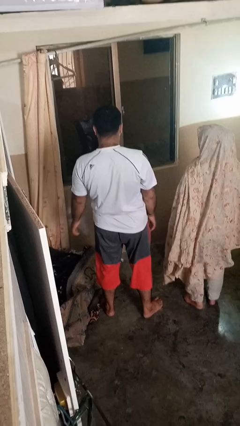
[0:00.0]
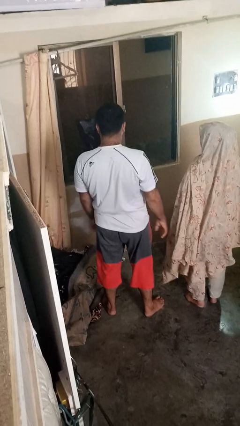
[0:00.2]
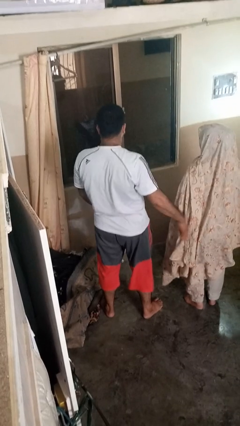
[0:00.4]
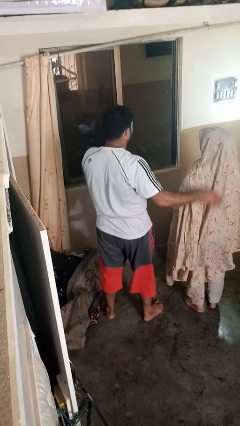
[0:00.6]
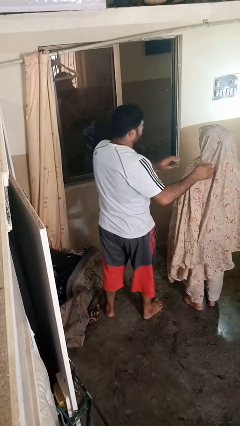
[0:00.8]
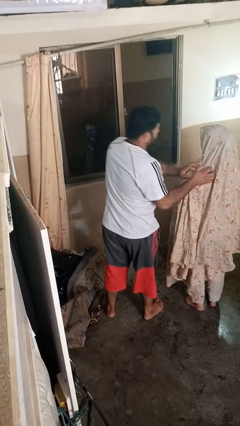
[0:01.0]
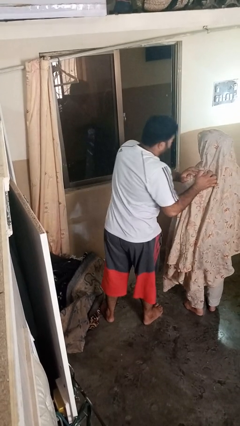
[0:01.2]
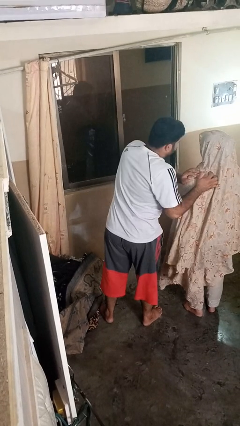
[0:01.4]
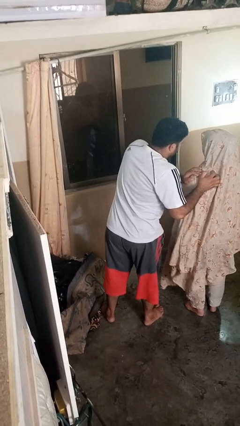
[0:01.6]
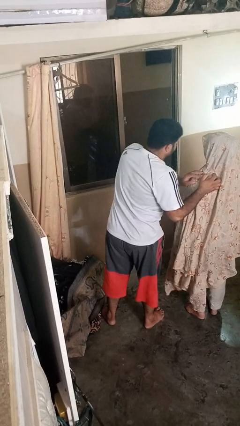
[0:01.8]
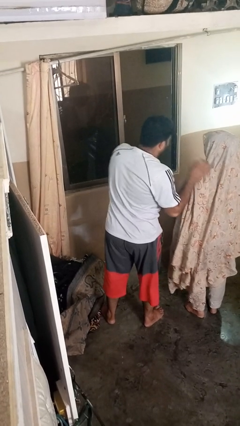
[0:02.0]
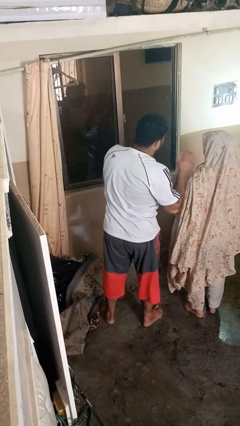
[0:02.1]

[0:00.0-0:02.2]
person shoves person

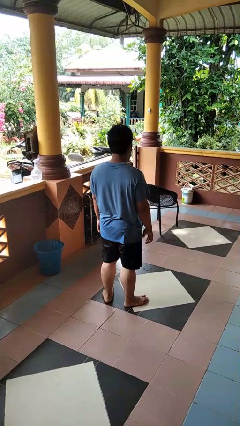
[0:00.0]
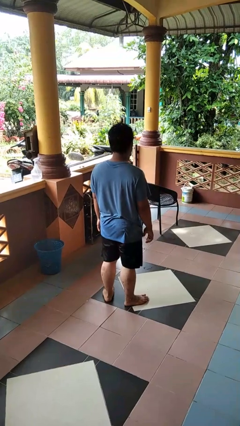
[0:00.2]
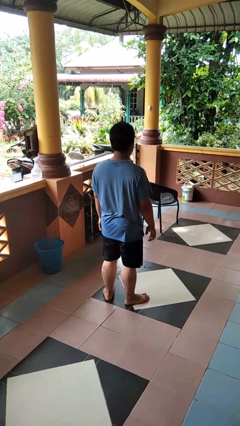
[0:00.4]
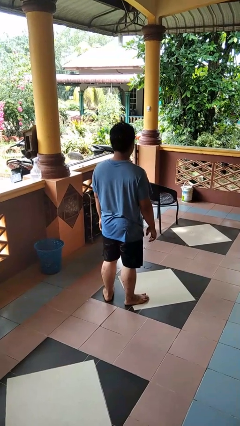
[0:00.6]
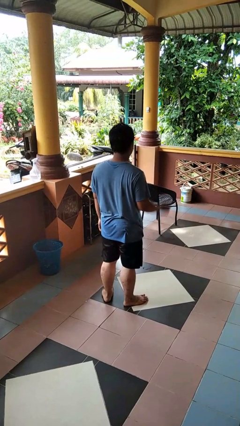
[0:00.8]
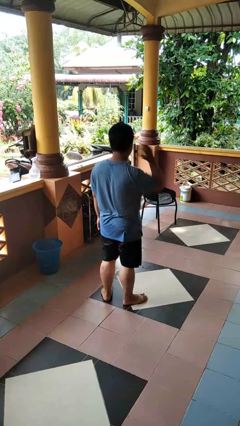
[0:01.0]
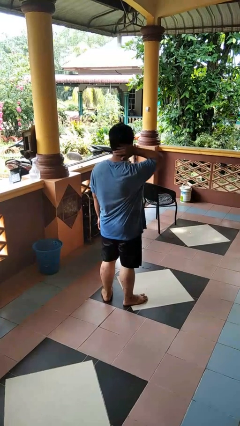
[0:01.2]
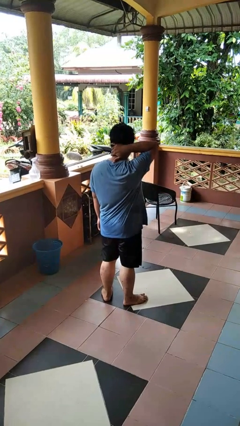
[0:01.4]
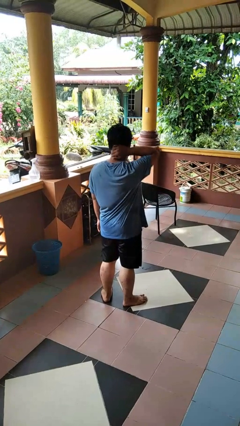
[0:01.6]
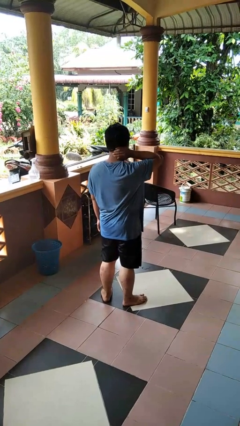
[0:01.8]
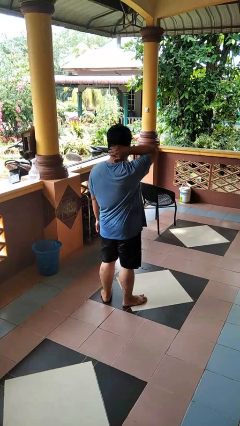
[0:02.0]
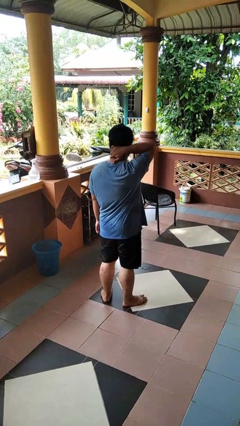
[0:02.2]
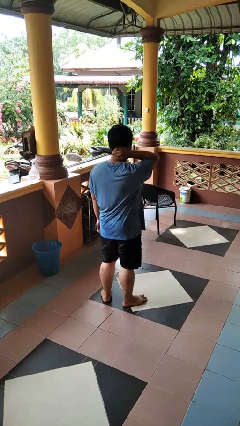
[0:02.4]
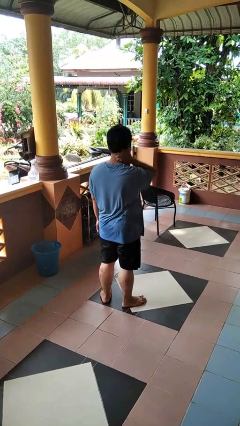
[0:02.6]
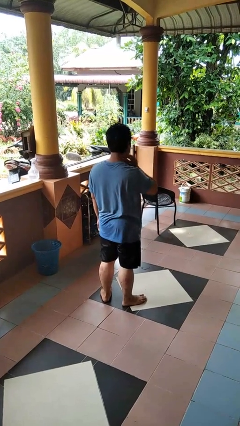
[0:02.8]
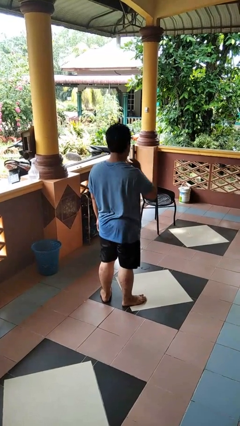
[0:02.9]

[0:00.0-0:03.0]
person rubs neck

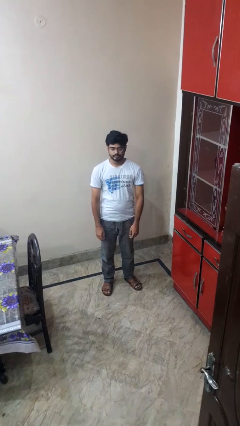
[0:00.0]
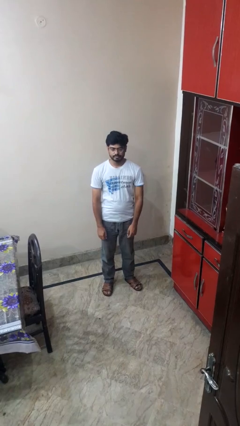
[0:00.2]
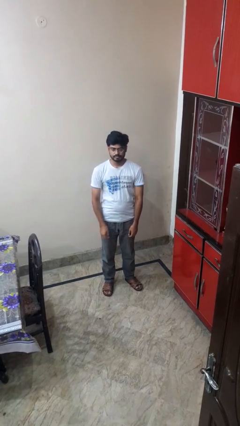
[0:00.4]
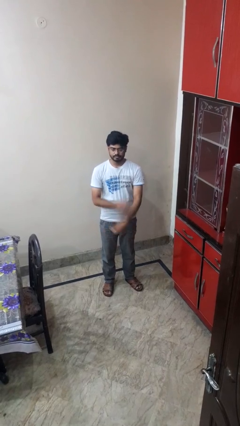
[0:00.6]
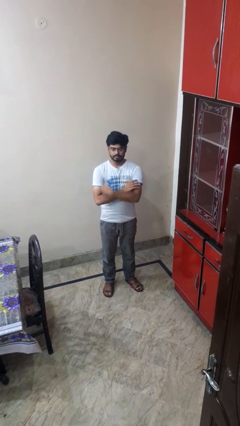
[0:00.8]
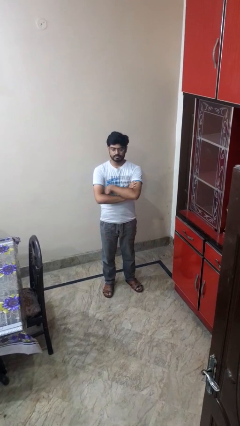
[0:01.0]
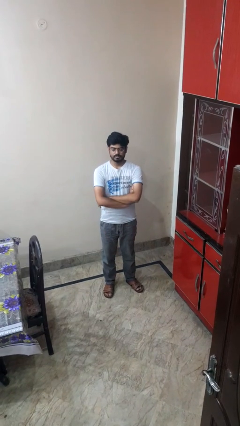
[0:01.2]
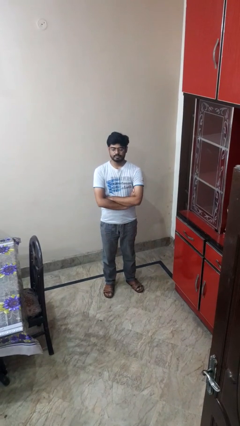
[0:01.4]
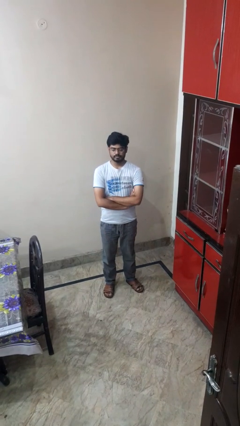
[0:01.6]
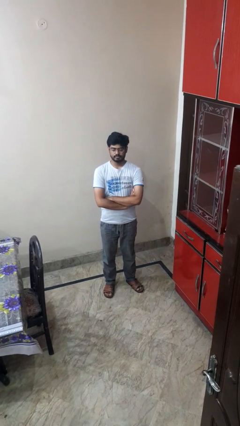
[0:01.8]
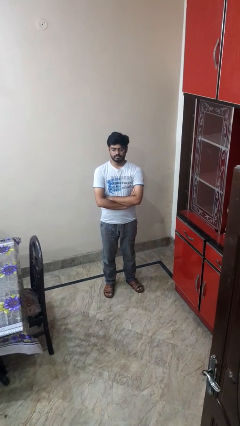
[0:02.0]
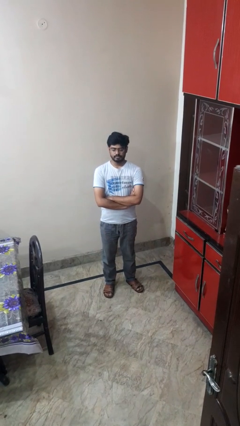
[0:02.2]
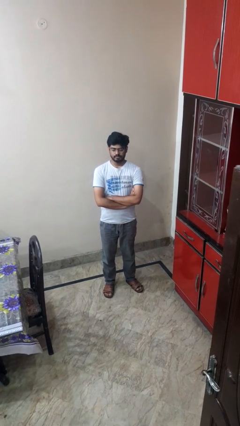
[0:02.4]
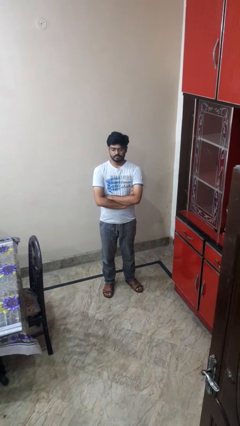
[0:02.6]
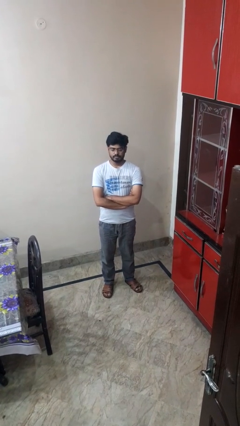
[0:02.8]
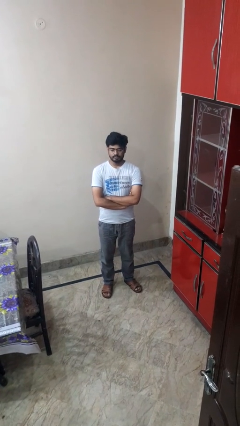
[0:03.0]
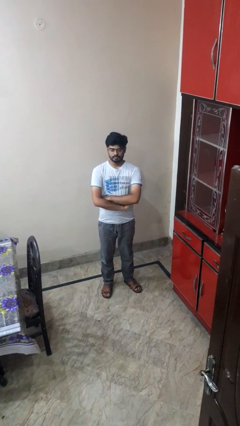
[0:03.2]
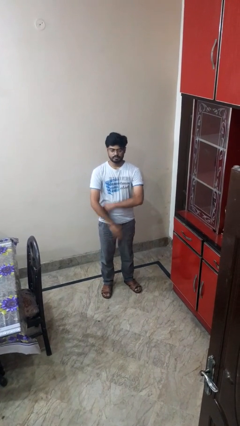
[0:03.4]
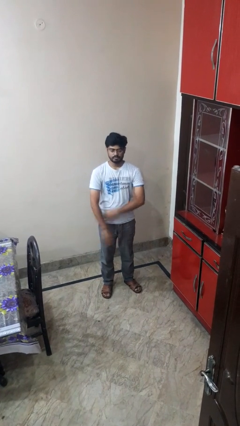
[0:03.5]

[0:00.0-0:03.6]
person crosses arms

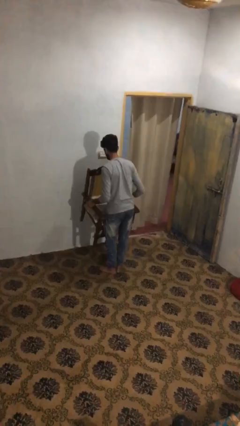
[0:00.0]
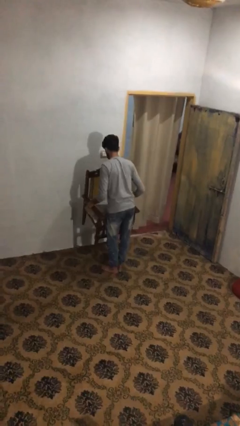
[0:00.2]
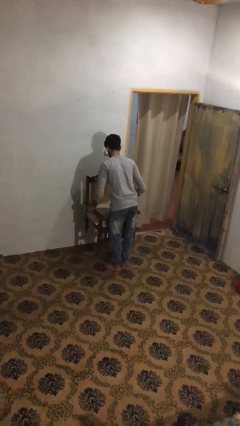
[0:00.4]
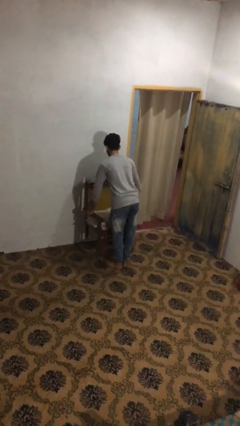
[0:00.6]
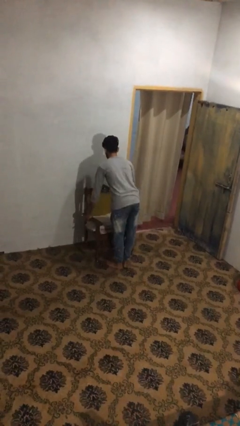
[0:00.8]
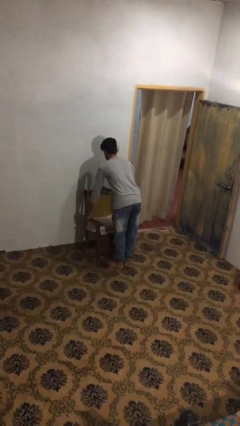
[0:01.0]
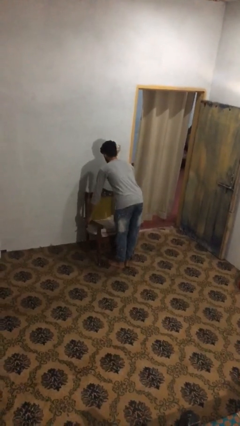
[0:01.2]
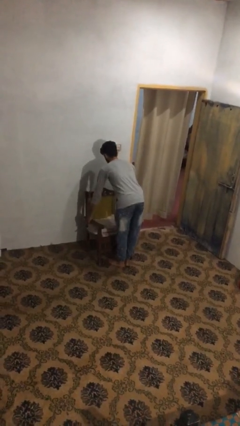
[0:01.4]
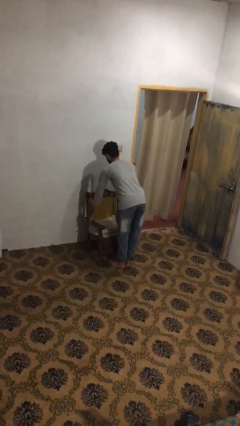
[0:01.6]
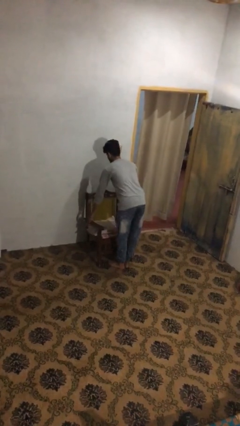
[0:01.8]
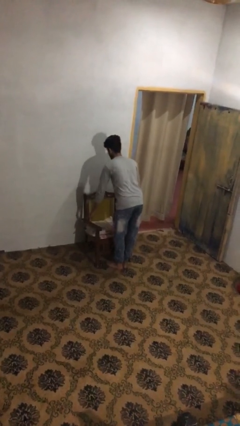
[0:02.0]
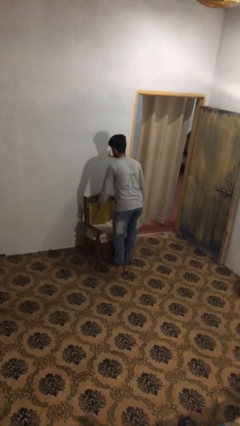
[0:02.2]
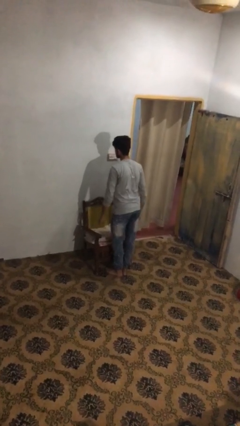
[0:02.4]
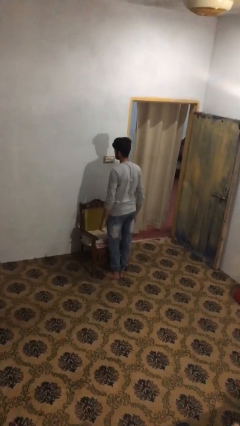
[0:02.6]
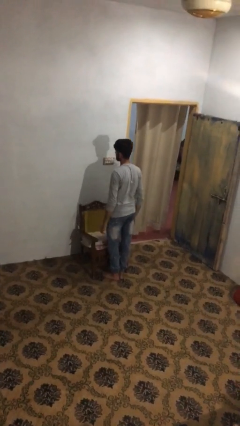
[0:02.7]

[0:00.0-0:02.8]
person puts down object on floor

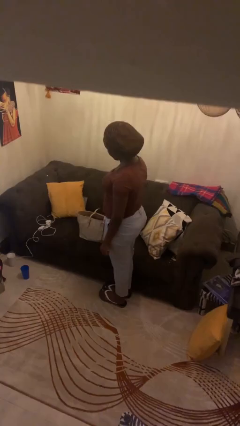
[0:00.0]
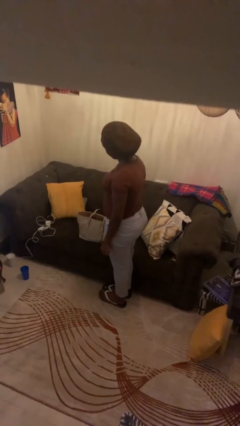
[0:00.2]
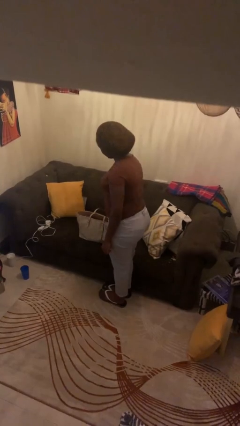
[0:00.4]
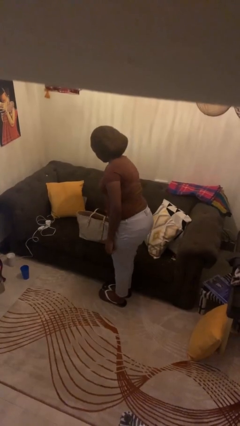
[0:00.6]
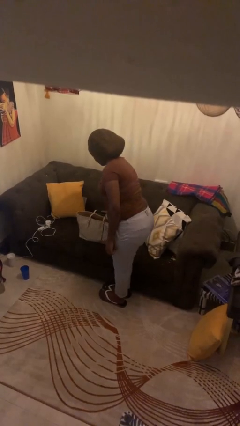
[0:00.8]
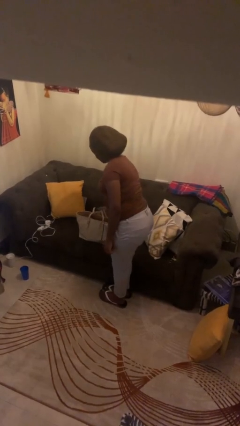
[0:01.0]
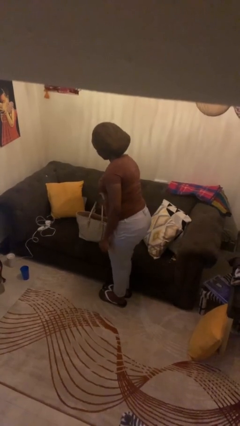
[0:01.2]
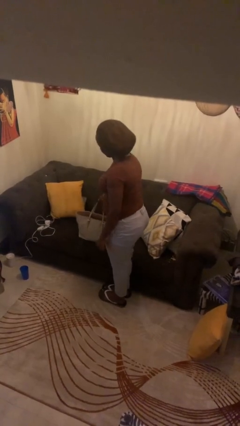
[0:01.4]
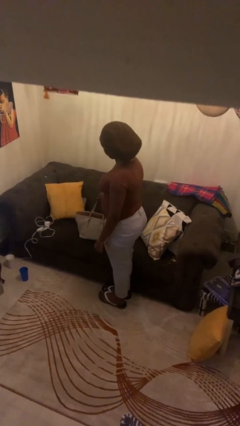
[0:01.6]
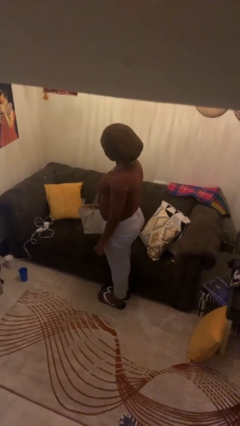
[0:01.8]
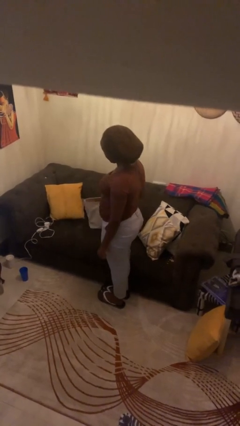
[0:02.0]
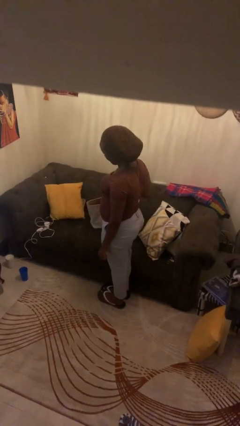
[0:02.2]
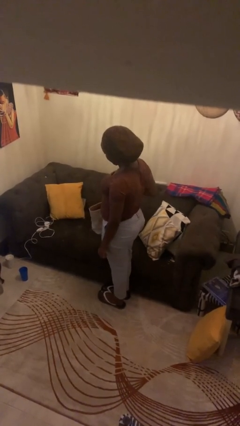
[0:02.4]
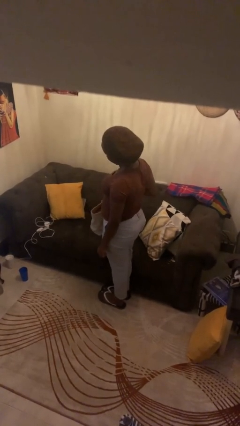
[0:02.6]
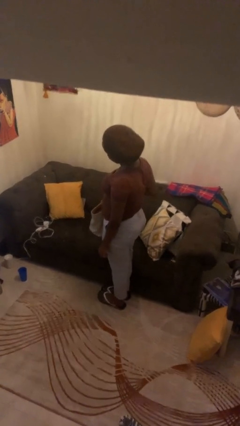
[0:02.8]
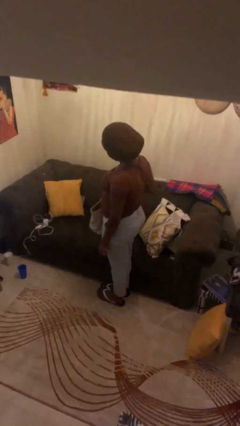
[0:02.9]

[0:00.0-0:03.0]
person picks up object from couch

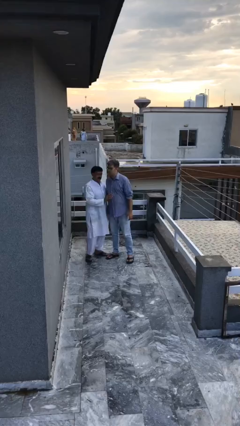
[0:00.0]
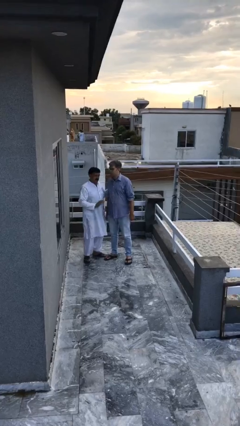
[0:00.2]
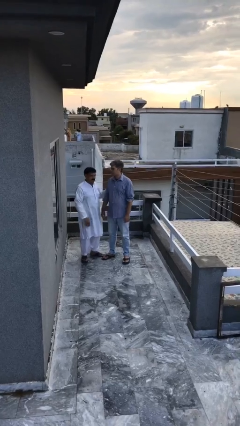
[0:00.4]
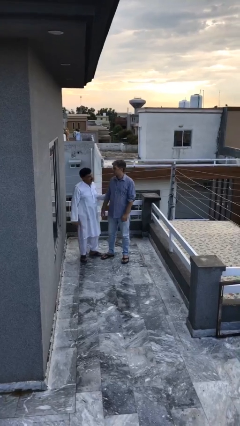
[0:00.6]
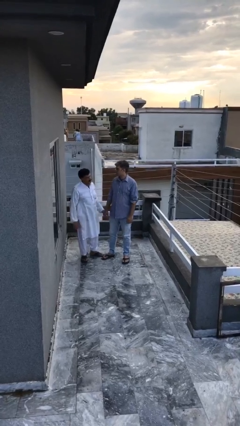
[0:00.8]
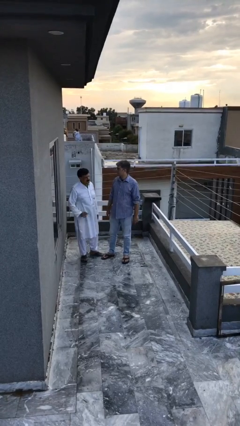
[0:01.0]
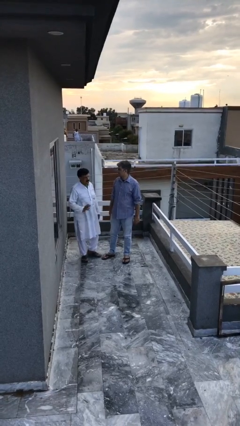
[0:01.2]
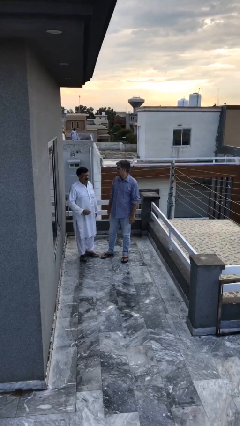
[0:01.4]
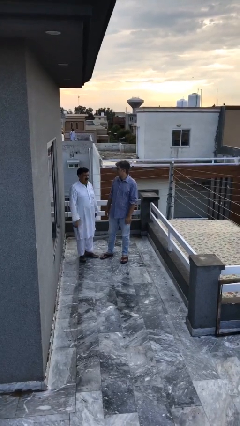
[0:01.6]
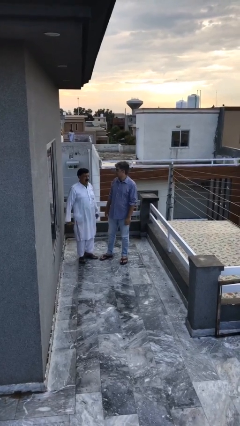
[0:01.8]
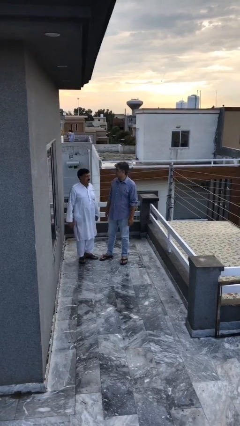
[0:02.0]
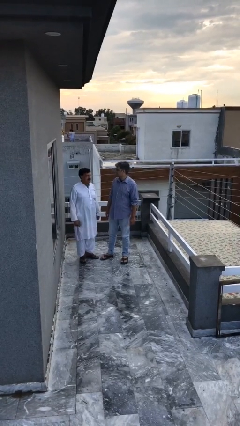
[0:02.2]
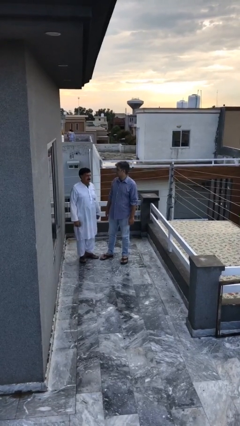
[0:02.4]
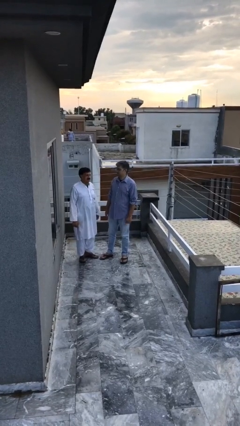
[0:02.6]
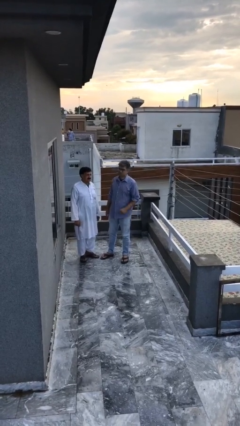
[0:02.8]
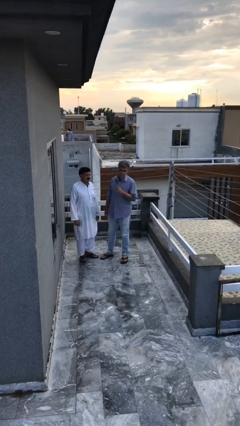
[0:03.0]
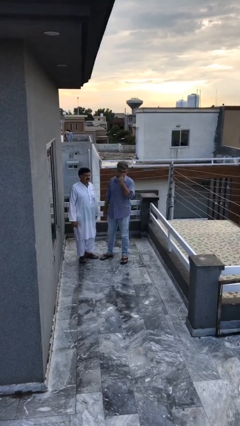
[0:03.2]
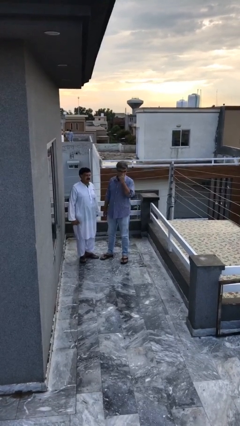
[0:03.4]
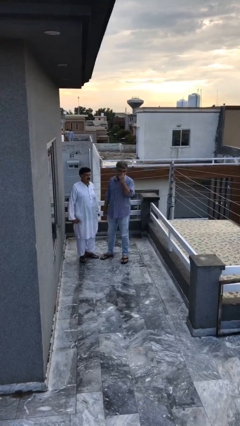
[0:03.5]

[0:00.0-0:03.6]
person talks to person
